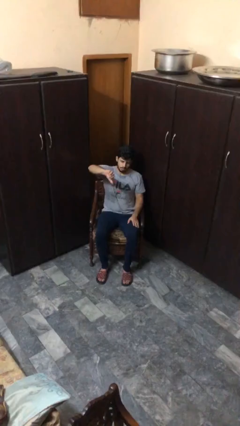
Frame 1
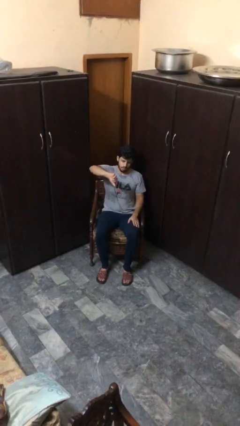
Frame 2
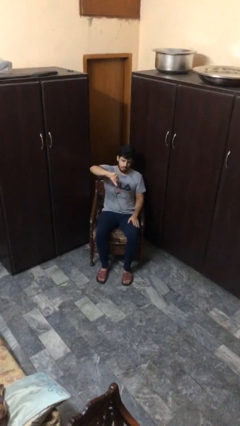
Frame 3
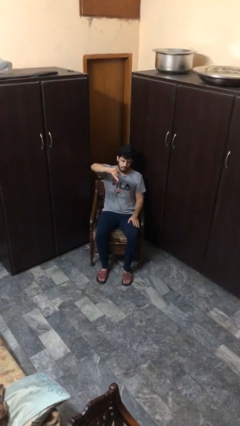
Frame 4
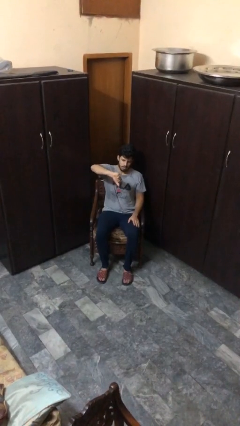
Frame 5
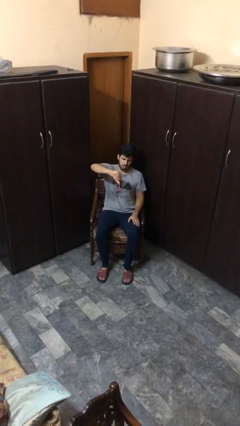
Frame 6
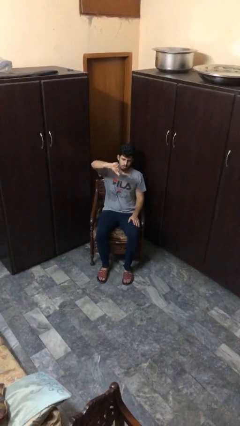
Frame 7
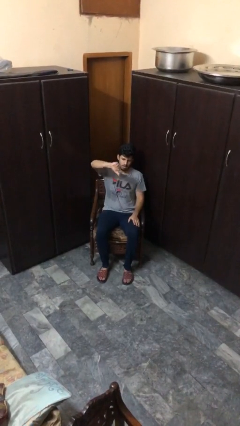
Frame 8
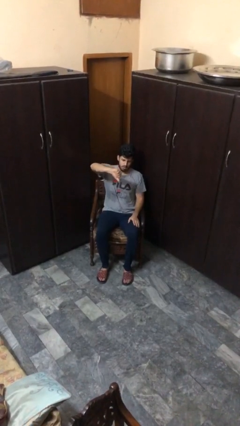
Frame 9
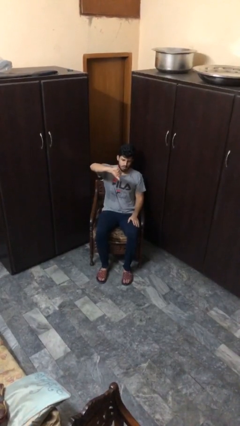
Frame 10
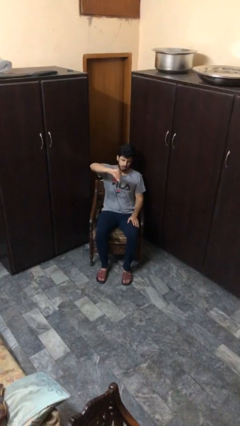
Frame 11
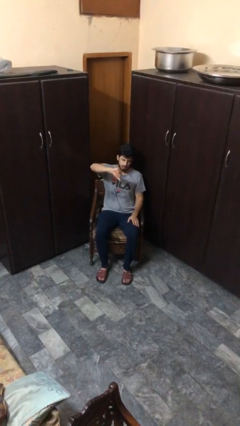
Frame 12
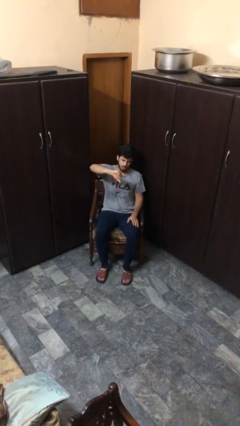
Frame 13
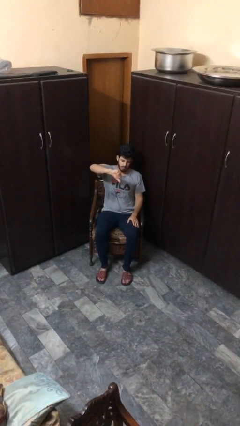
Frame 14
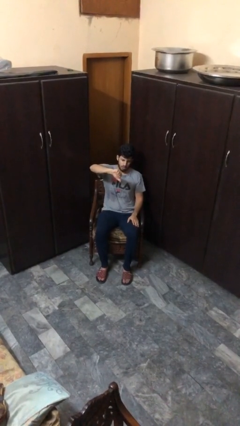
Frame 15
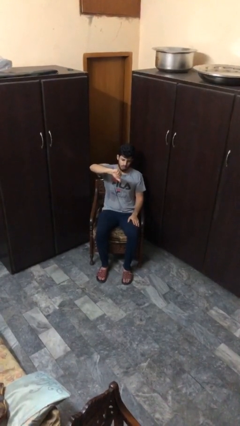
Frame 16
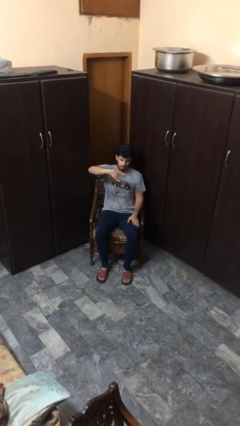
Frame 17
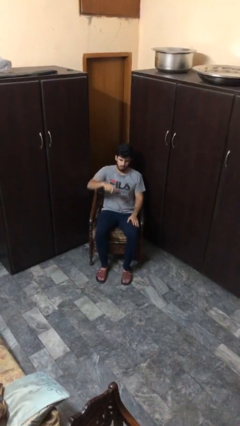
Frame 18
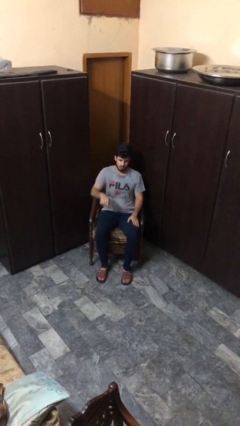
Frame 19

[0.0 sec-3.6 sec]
person gestures thumbs down

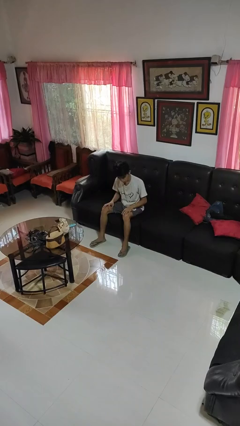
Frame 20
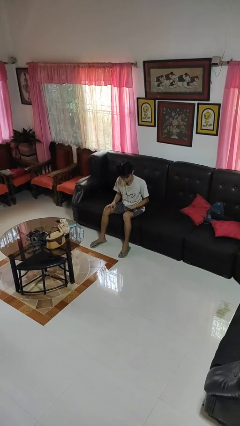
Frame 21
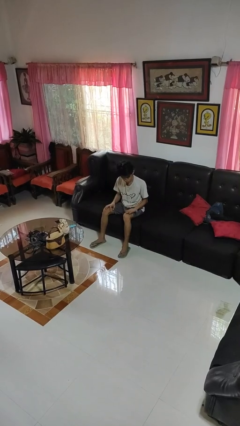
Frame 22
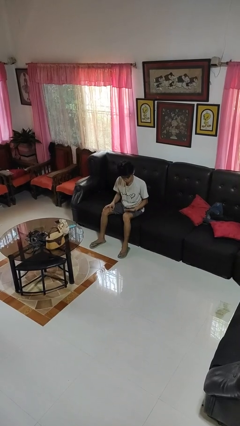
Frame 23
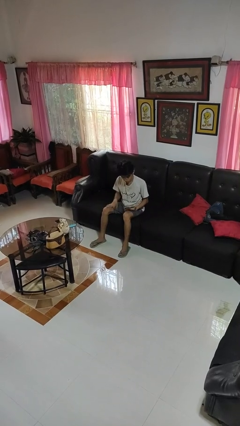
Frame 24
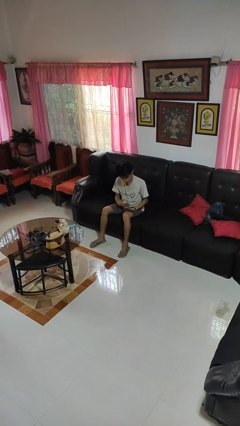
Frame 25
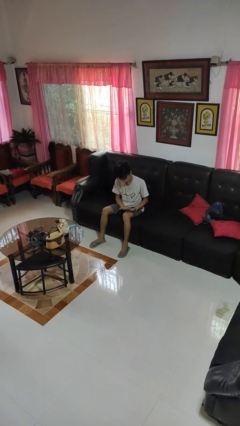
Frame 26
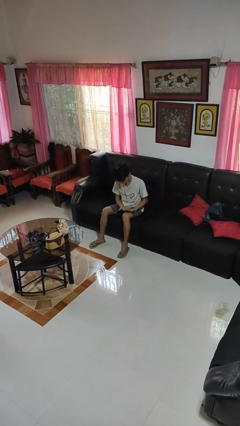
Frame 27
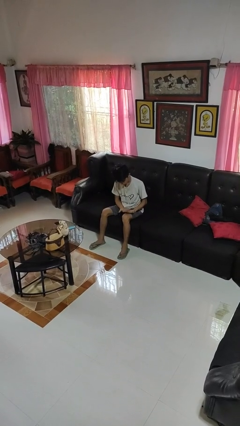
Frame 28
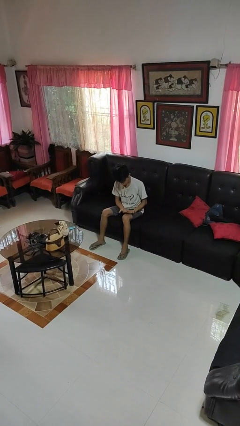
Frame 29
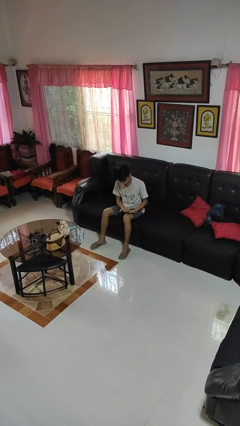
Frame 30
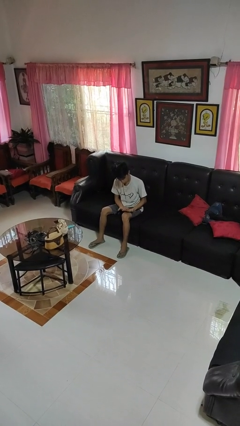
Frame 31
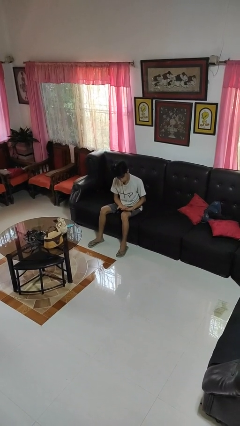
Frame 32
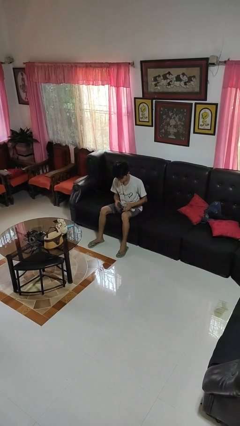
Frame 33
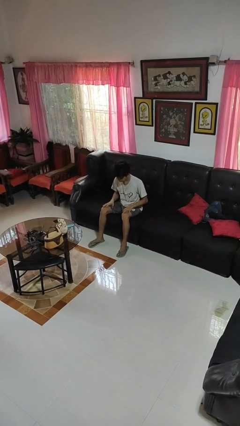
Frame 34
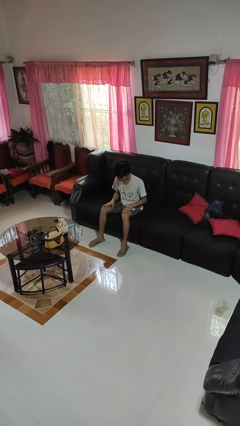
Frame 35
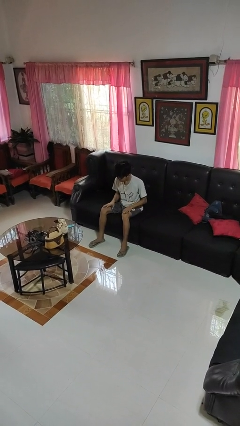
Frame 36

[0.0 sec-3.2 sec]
person looks at hands in lap

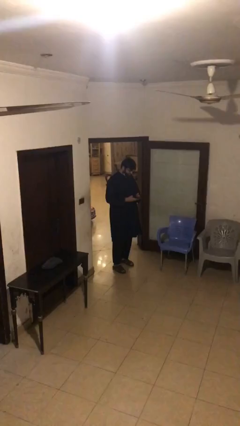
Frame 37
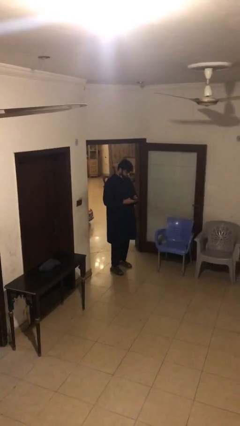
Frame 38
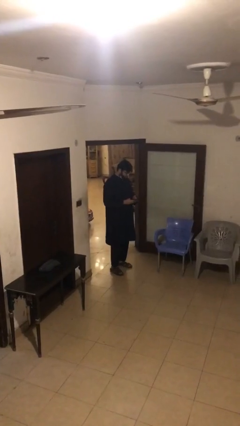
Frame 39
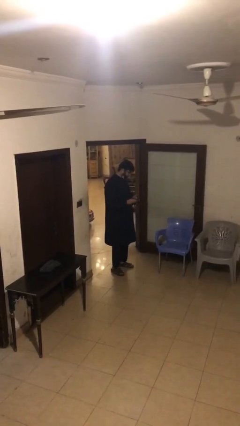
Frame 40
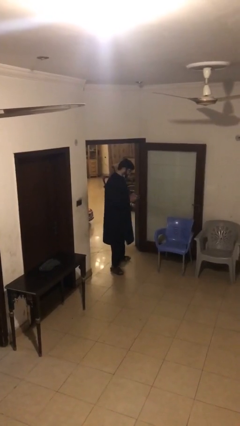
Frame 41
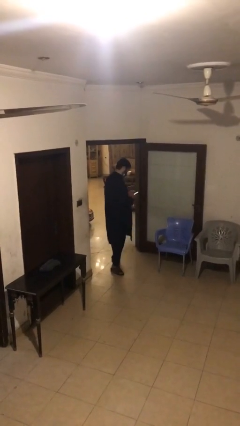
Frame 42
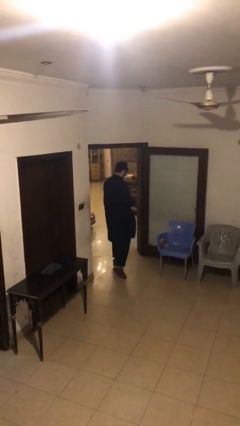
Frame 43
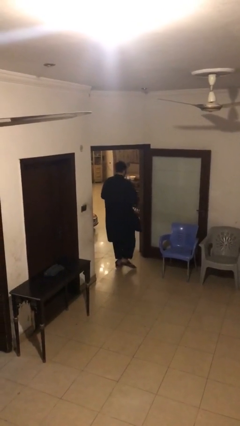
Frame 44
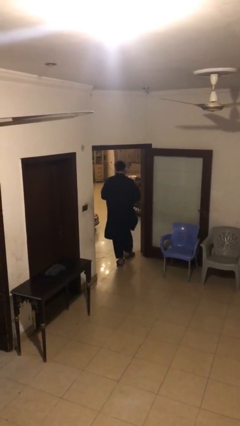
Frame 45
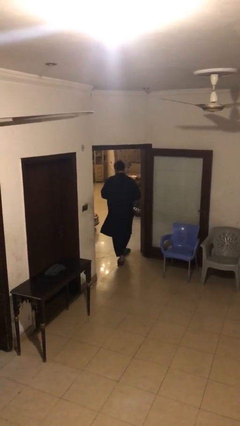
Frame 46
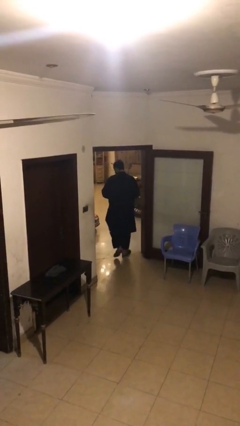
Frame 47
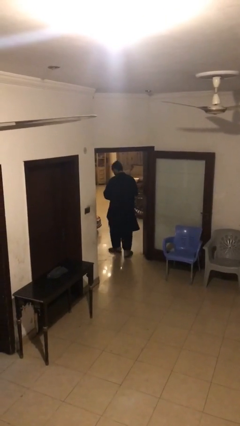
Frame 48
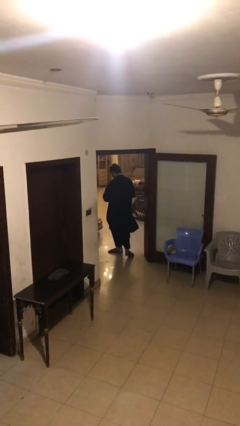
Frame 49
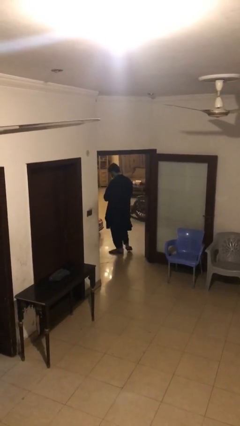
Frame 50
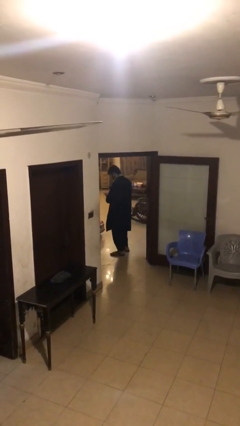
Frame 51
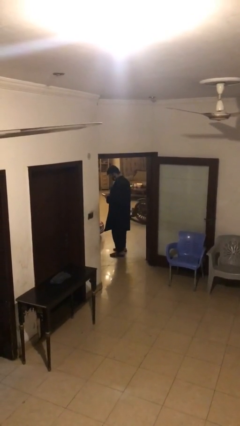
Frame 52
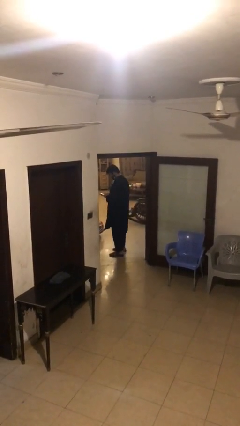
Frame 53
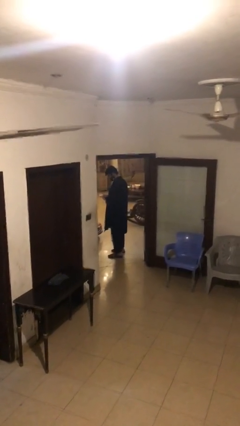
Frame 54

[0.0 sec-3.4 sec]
person exits scene through structure

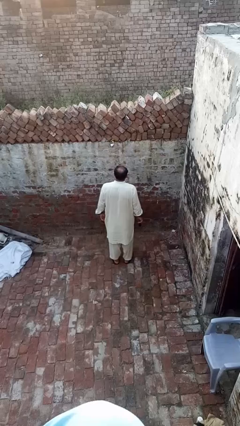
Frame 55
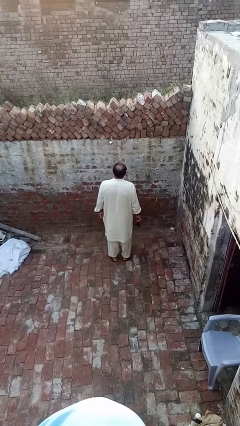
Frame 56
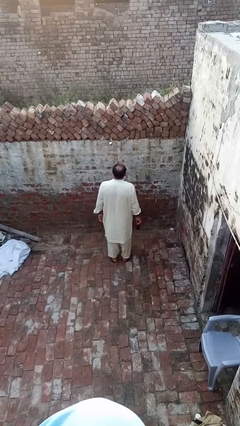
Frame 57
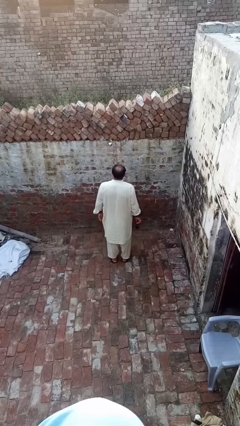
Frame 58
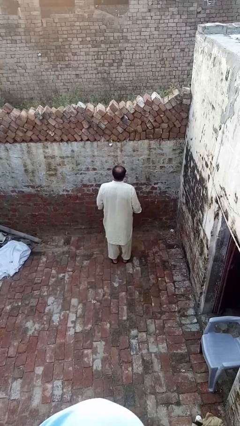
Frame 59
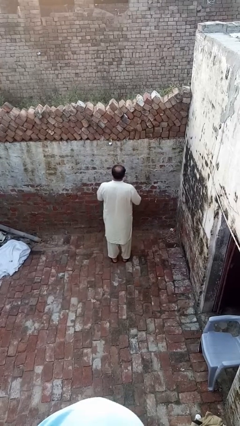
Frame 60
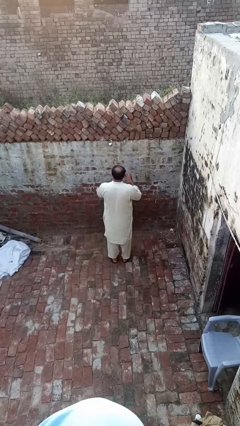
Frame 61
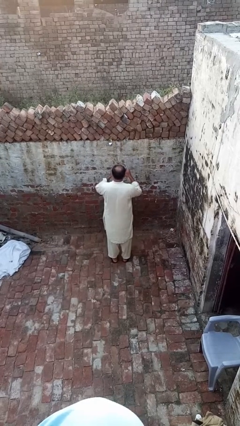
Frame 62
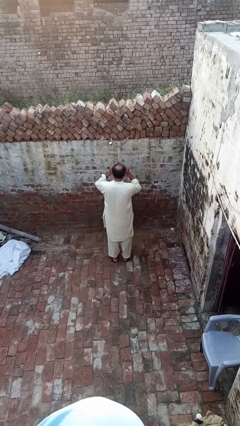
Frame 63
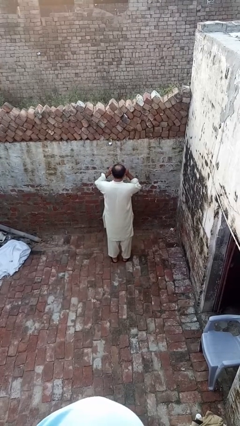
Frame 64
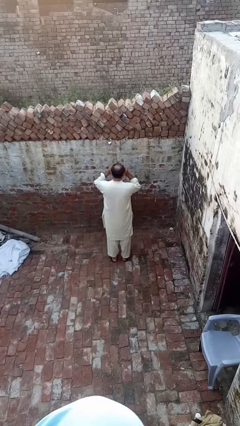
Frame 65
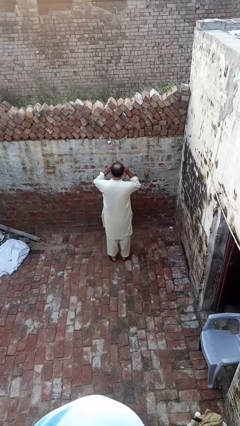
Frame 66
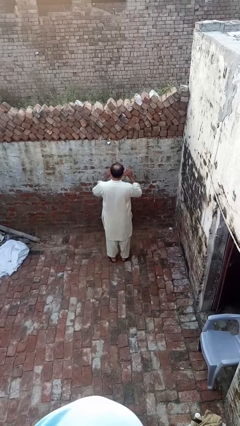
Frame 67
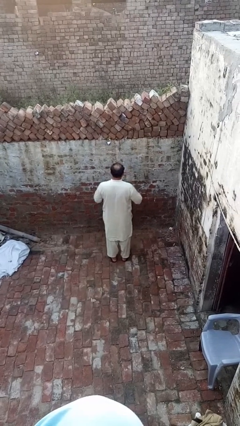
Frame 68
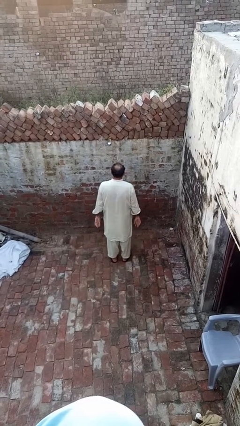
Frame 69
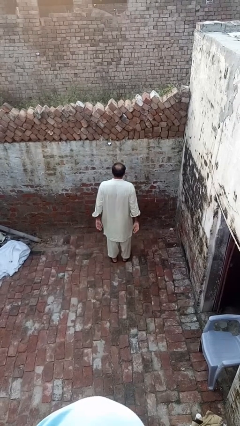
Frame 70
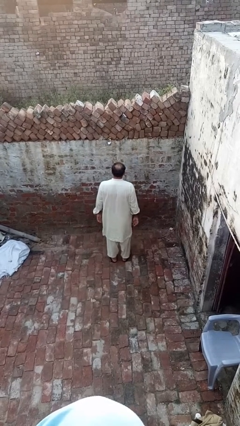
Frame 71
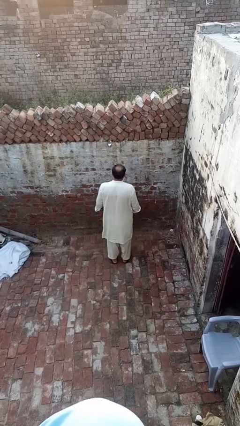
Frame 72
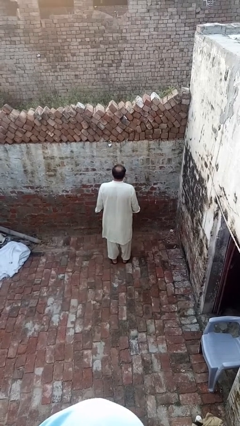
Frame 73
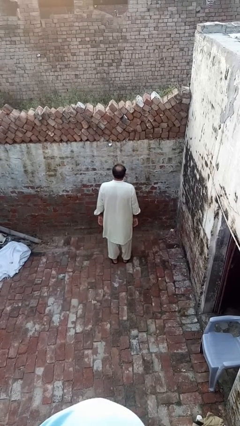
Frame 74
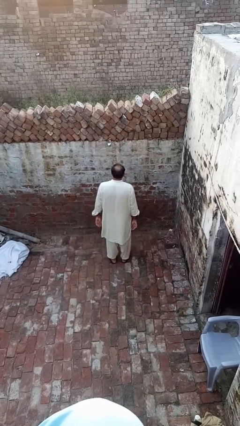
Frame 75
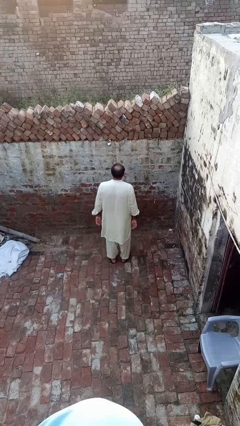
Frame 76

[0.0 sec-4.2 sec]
person puts on sunglasses

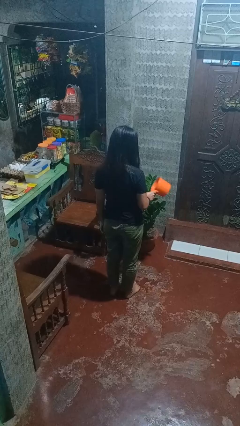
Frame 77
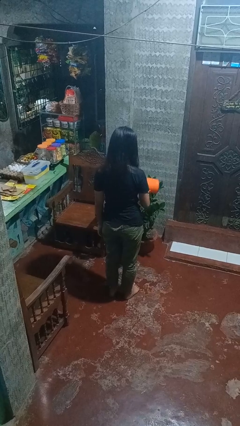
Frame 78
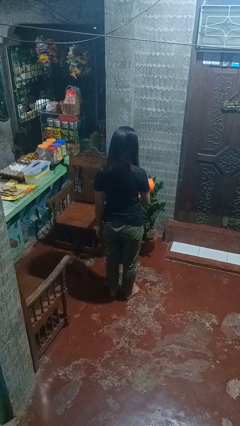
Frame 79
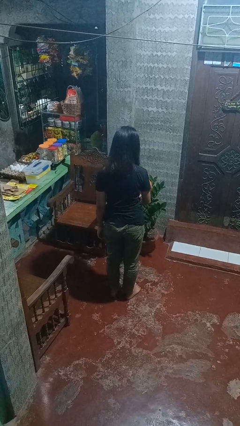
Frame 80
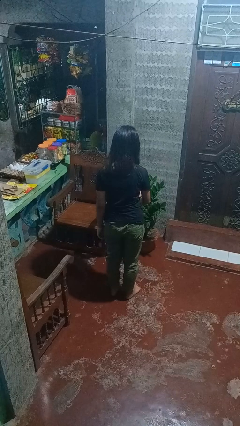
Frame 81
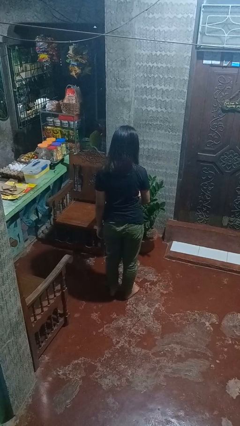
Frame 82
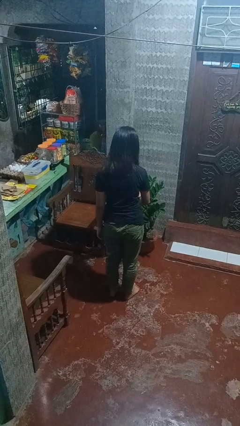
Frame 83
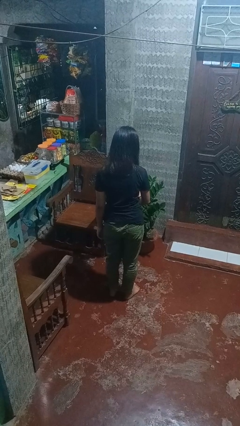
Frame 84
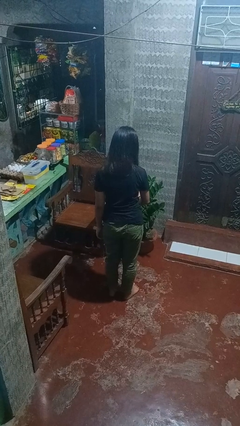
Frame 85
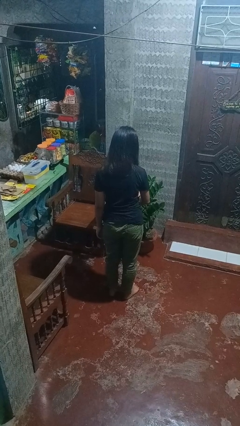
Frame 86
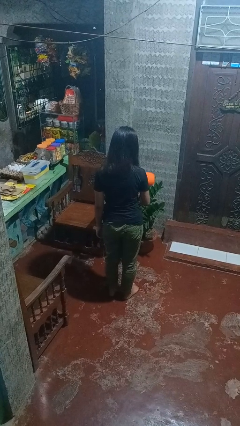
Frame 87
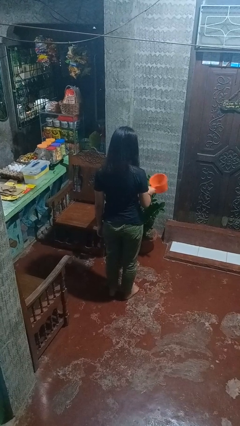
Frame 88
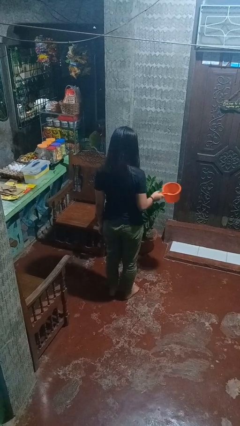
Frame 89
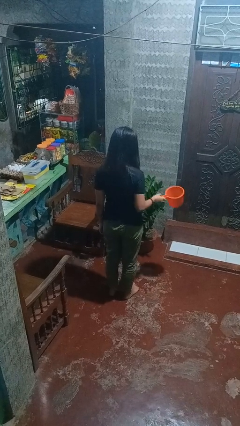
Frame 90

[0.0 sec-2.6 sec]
person waters houseplant

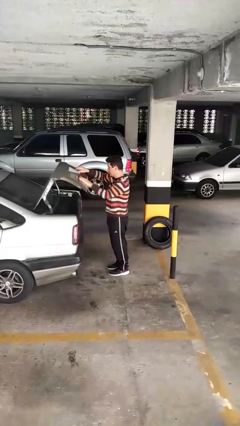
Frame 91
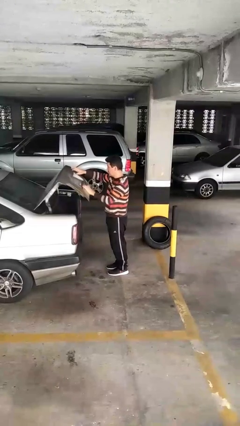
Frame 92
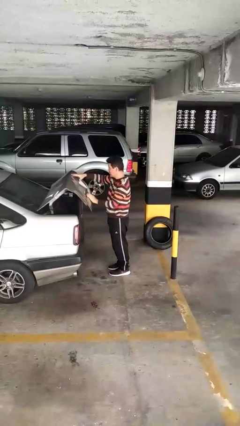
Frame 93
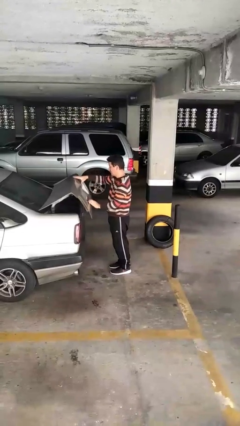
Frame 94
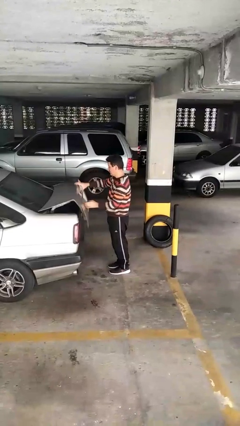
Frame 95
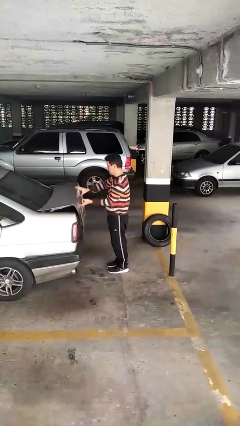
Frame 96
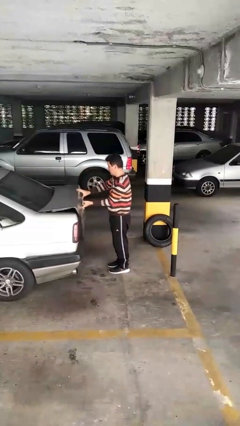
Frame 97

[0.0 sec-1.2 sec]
person closes car trunk
